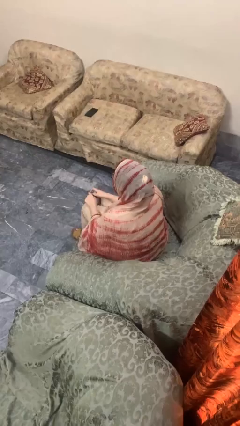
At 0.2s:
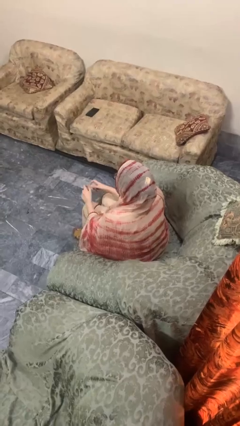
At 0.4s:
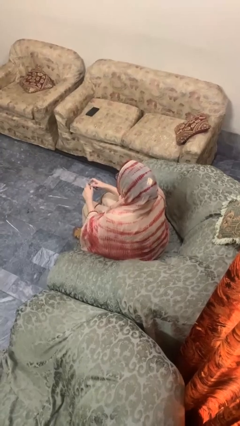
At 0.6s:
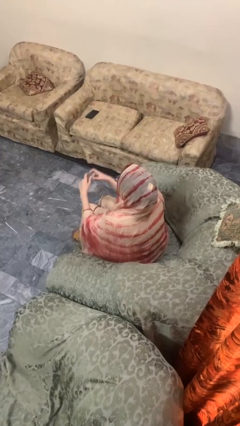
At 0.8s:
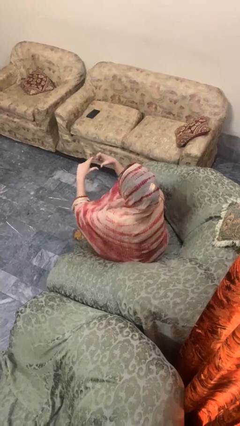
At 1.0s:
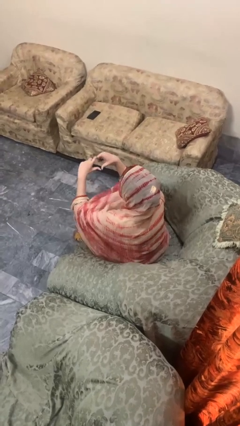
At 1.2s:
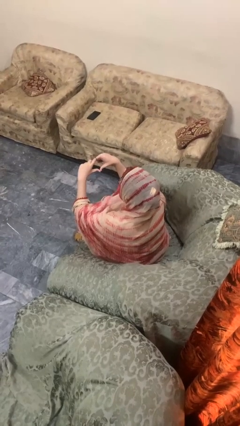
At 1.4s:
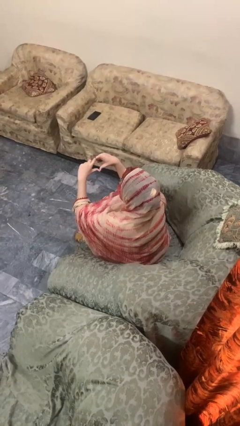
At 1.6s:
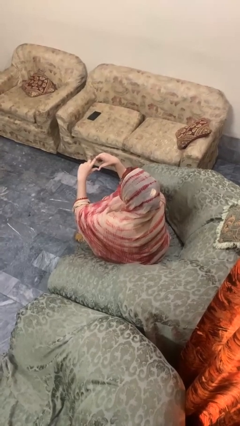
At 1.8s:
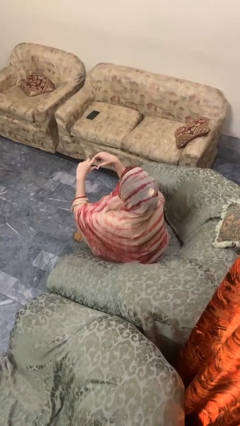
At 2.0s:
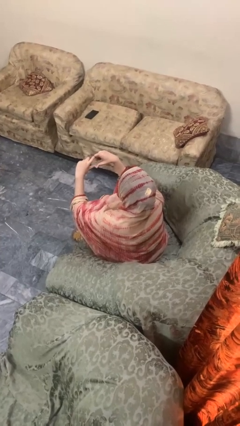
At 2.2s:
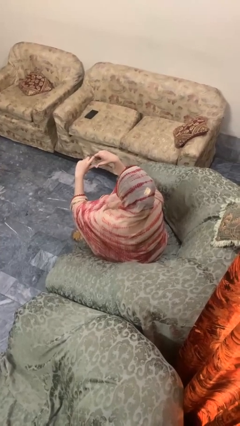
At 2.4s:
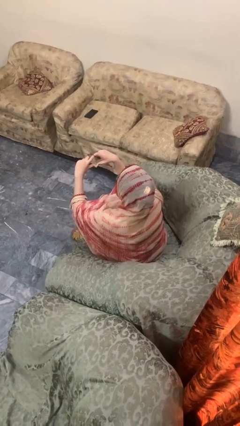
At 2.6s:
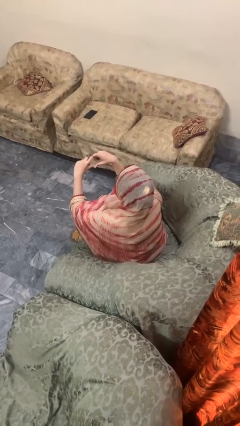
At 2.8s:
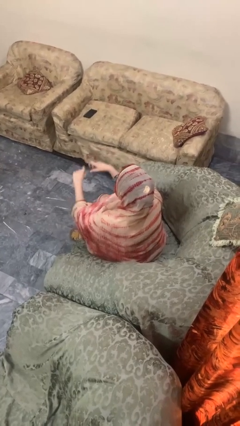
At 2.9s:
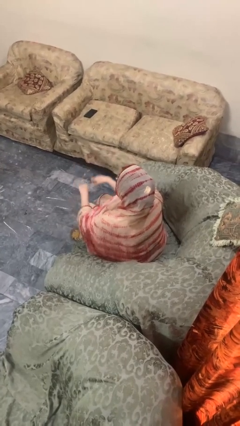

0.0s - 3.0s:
person gestures heart

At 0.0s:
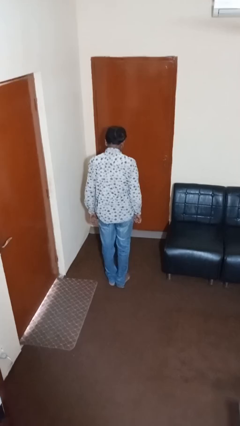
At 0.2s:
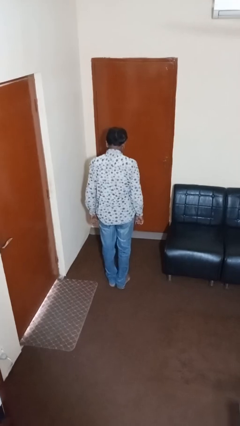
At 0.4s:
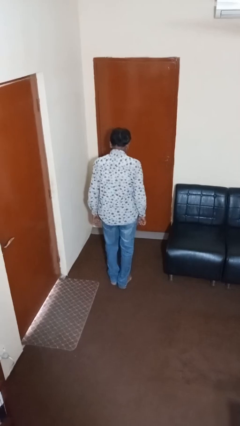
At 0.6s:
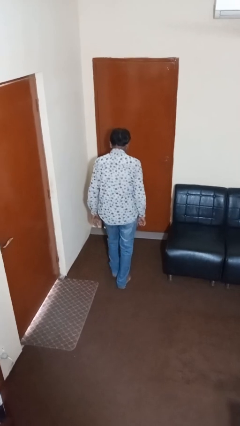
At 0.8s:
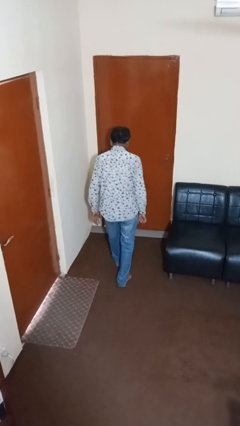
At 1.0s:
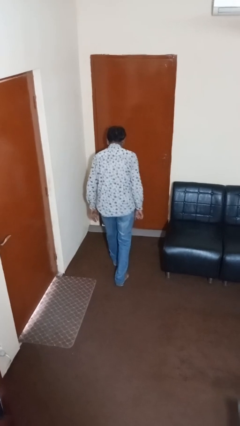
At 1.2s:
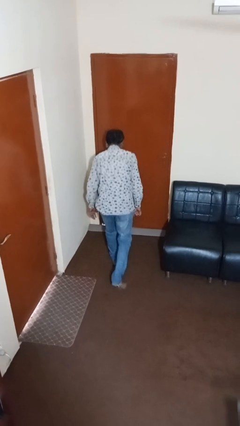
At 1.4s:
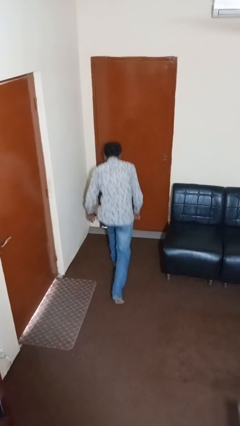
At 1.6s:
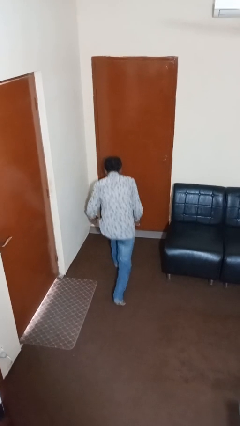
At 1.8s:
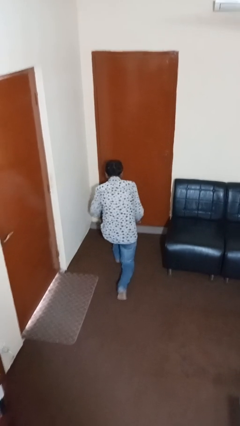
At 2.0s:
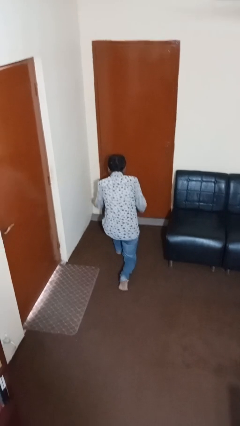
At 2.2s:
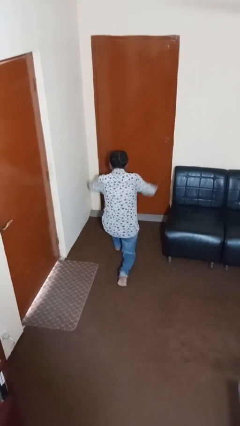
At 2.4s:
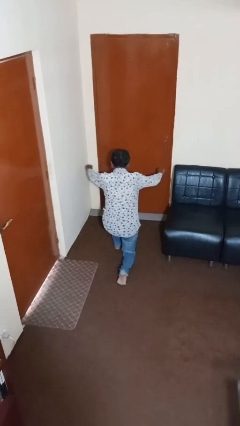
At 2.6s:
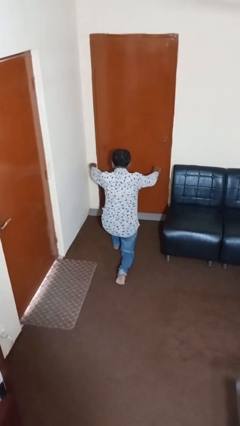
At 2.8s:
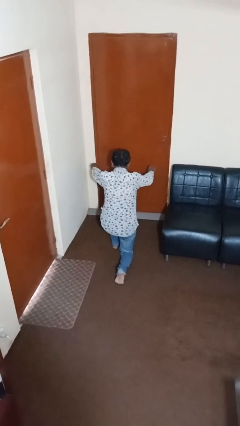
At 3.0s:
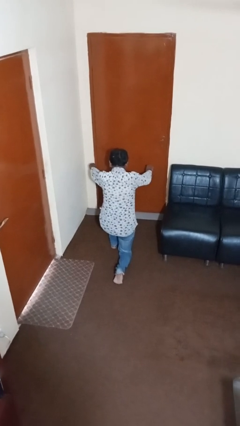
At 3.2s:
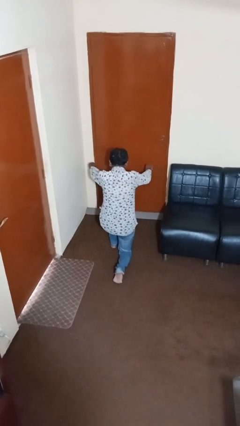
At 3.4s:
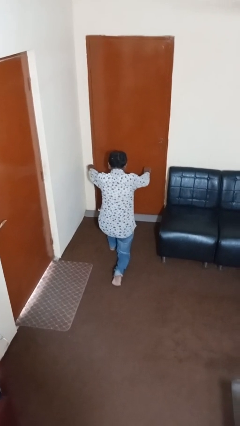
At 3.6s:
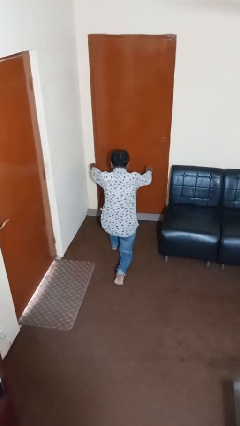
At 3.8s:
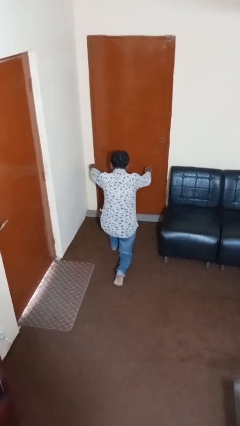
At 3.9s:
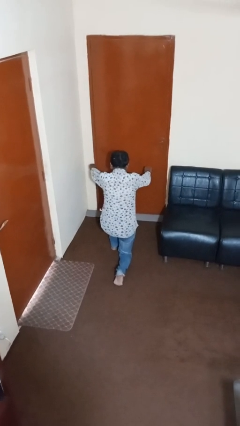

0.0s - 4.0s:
person exercises with lunges

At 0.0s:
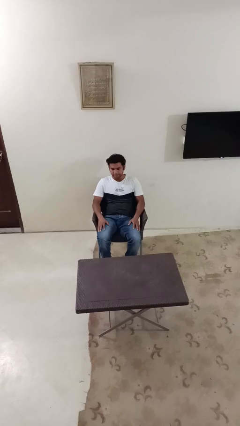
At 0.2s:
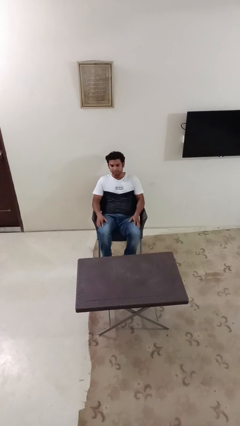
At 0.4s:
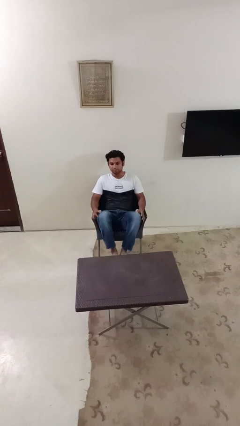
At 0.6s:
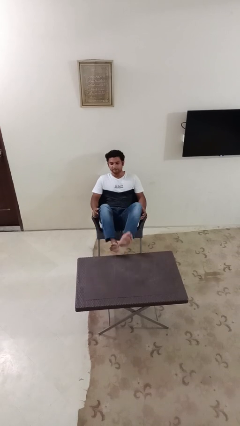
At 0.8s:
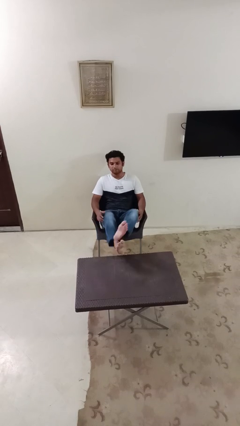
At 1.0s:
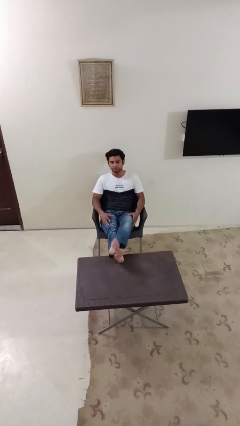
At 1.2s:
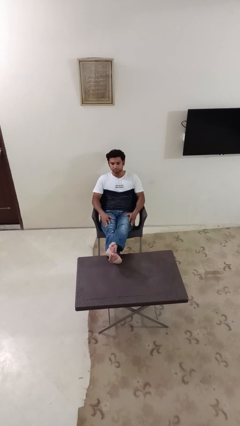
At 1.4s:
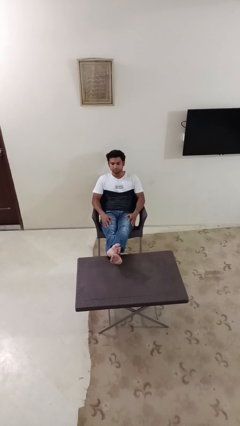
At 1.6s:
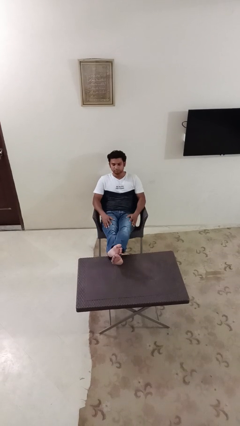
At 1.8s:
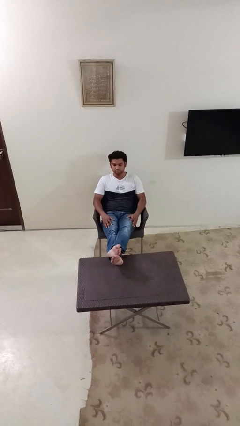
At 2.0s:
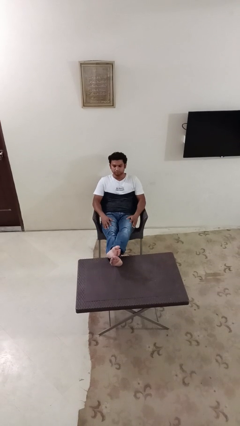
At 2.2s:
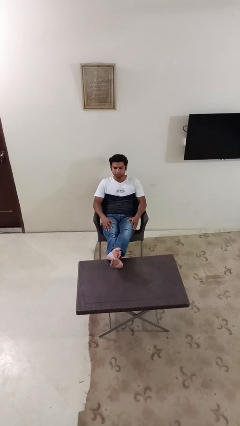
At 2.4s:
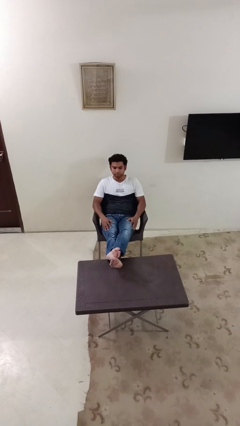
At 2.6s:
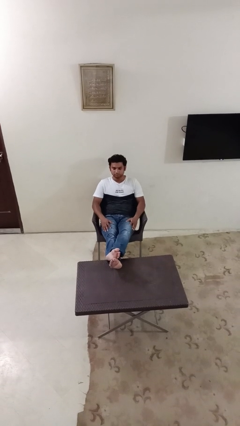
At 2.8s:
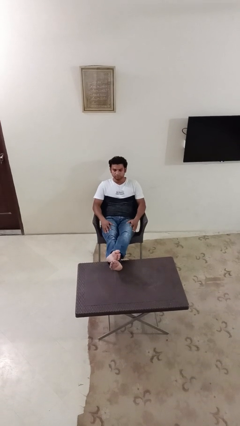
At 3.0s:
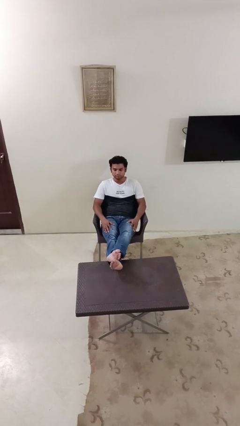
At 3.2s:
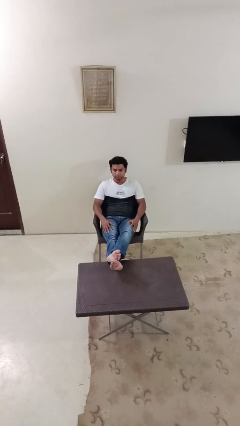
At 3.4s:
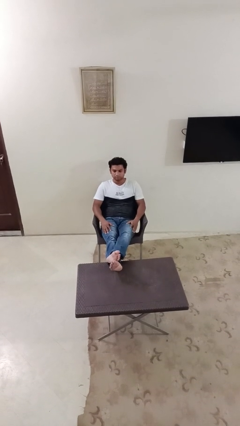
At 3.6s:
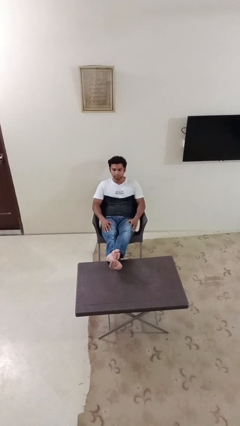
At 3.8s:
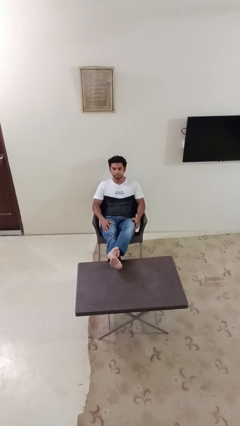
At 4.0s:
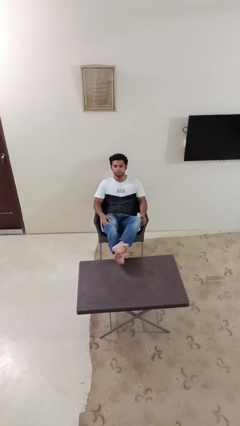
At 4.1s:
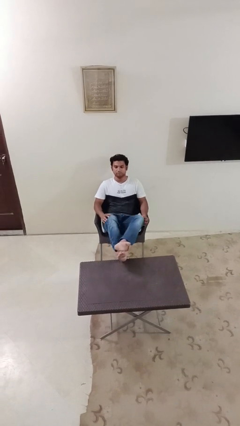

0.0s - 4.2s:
person puts feet up

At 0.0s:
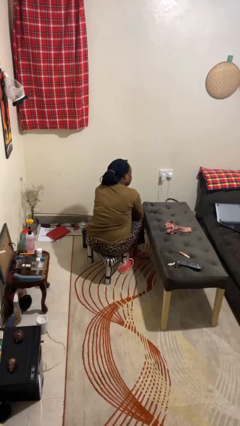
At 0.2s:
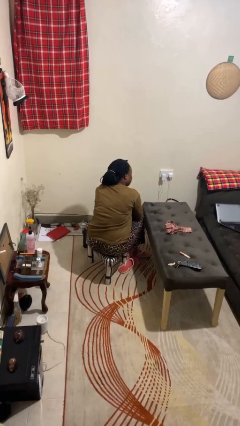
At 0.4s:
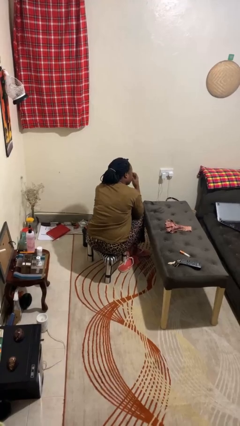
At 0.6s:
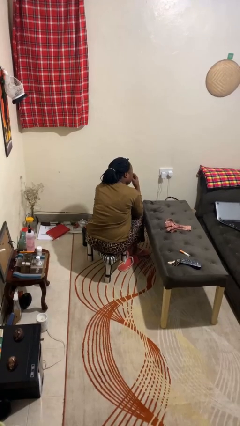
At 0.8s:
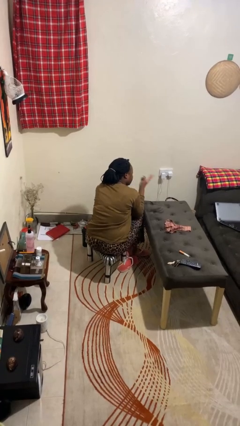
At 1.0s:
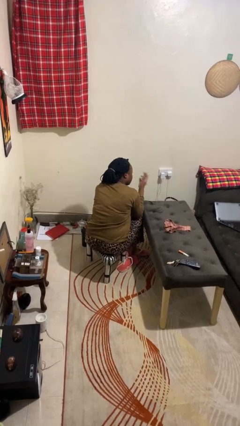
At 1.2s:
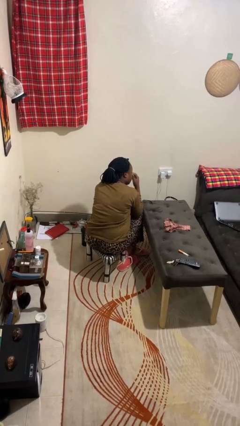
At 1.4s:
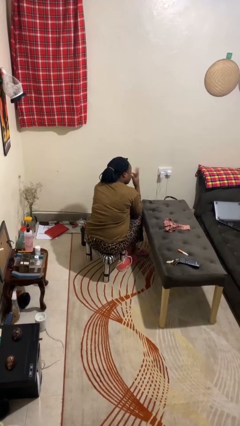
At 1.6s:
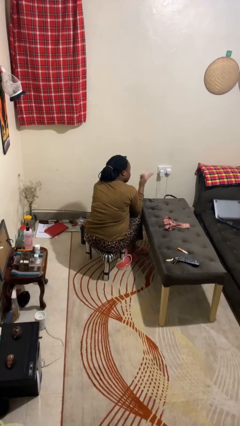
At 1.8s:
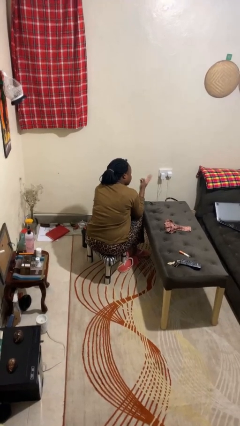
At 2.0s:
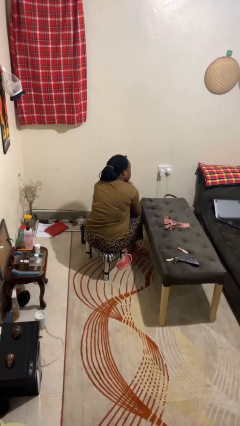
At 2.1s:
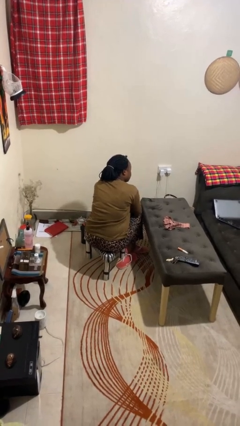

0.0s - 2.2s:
person gestures watch closely

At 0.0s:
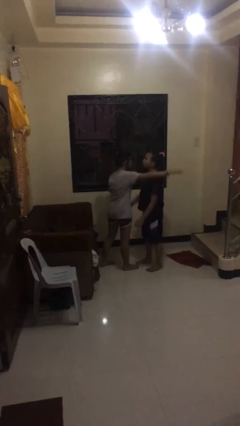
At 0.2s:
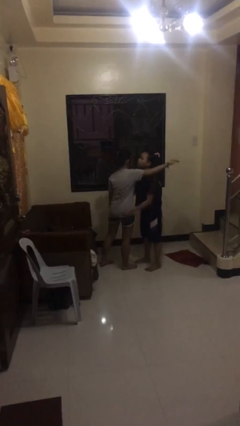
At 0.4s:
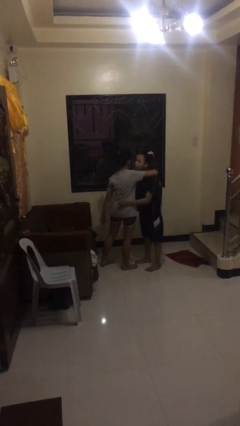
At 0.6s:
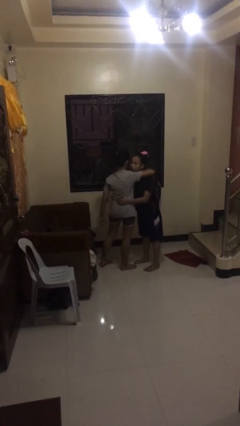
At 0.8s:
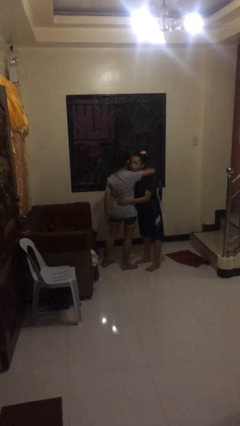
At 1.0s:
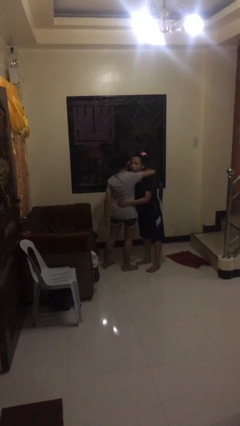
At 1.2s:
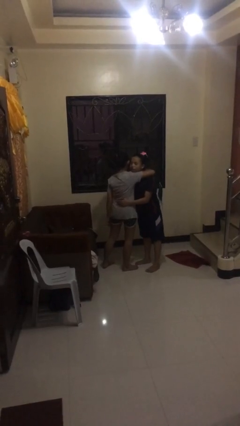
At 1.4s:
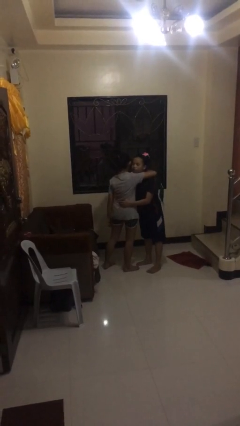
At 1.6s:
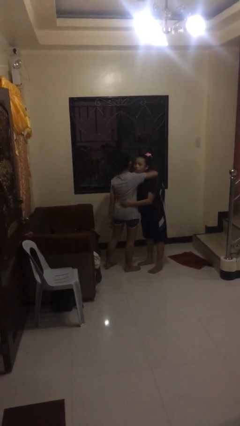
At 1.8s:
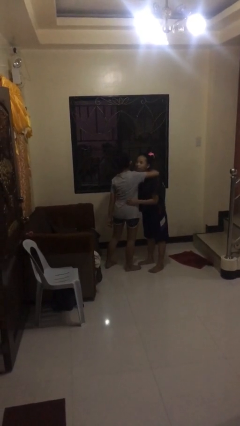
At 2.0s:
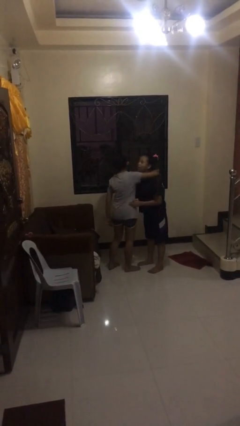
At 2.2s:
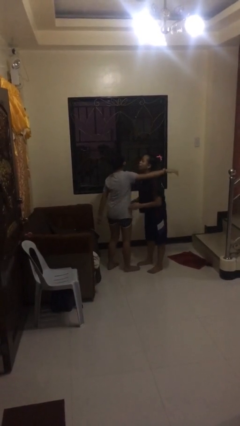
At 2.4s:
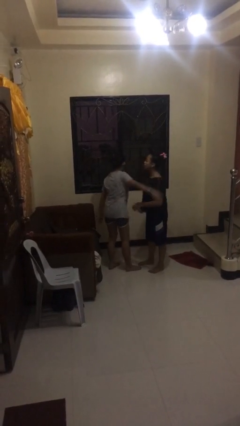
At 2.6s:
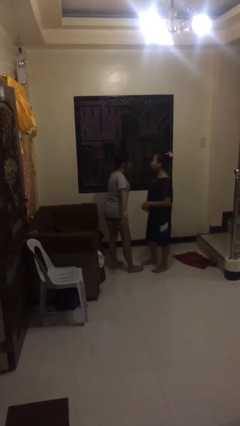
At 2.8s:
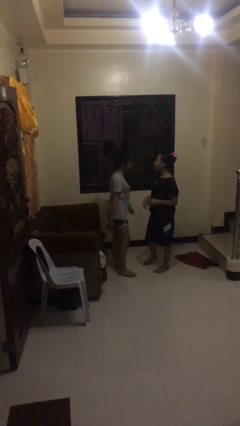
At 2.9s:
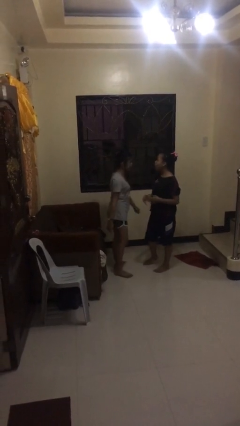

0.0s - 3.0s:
person embraces person

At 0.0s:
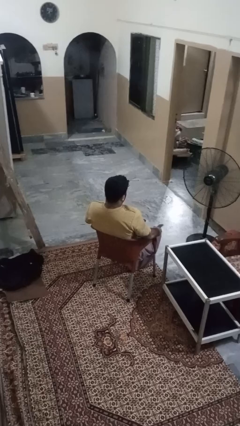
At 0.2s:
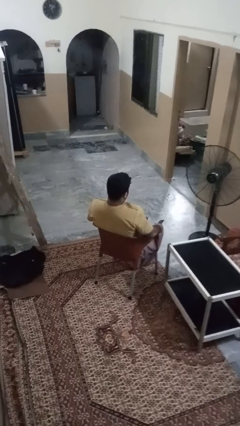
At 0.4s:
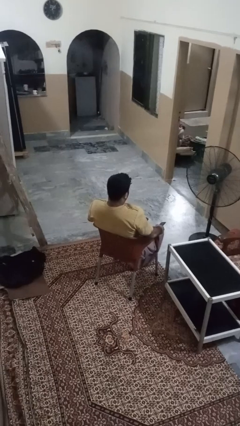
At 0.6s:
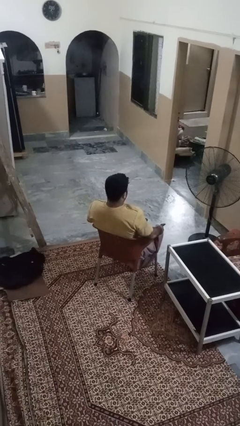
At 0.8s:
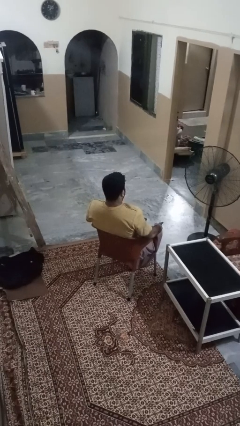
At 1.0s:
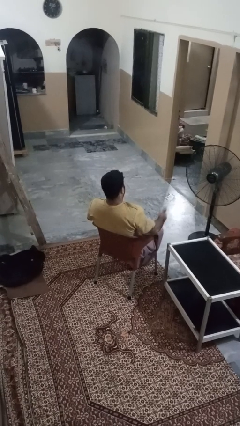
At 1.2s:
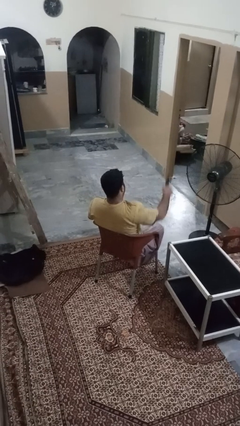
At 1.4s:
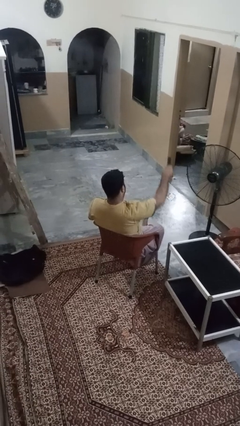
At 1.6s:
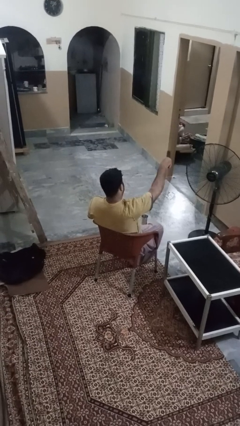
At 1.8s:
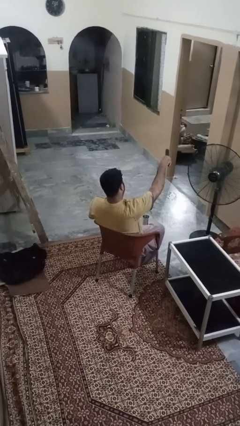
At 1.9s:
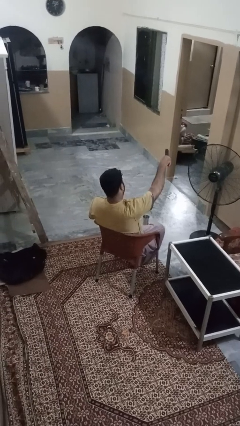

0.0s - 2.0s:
person uses television remote
